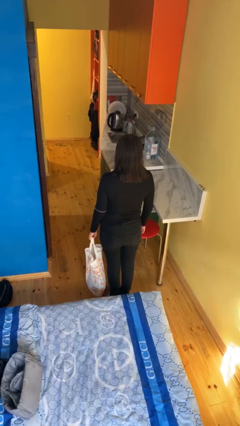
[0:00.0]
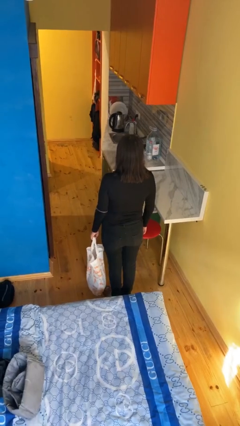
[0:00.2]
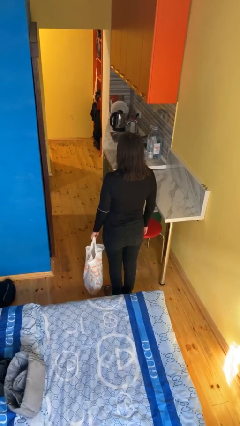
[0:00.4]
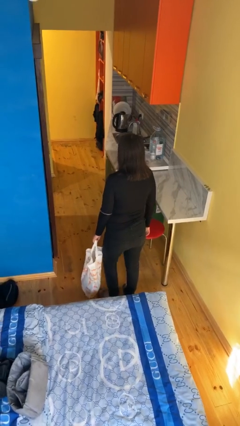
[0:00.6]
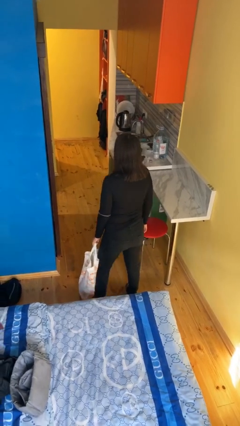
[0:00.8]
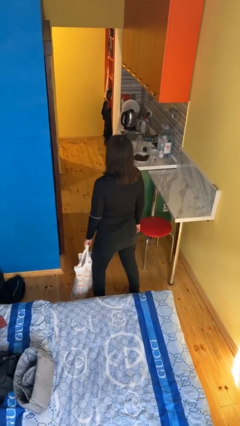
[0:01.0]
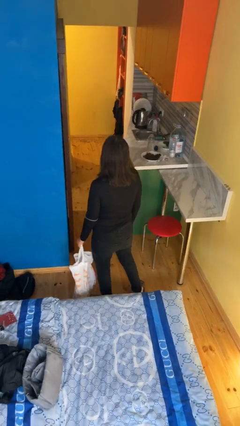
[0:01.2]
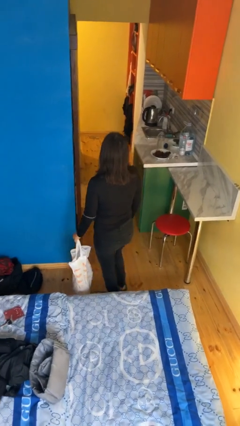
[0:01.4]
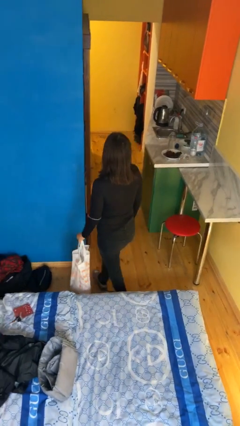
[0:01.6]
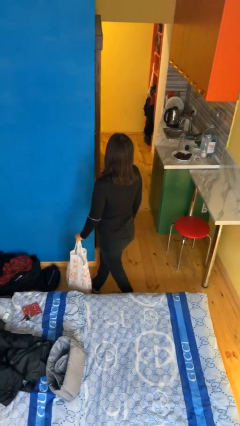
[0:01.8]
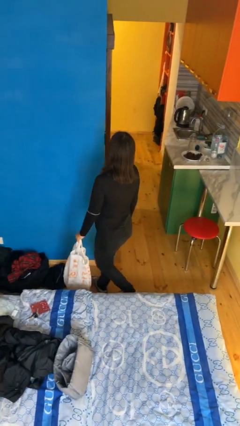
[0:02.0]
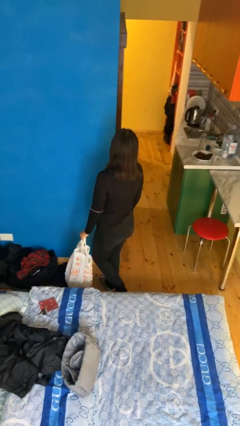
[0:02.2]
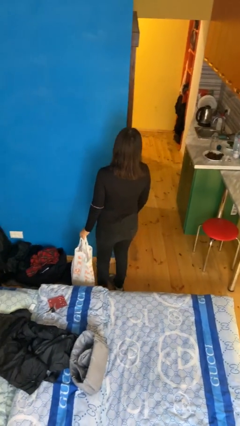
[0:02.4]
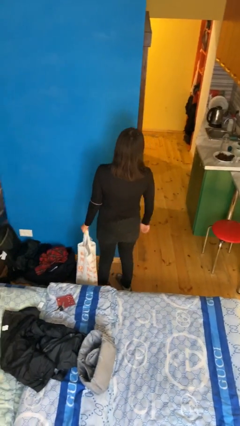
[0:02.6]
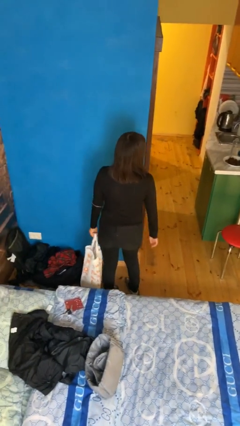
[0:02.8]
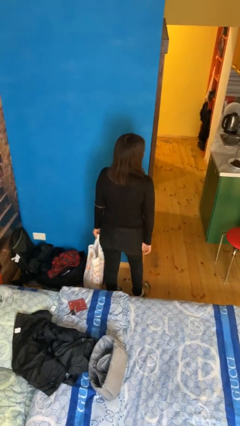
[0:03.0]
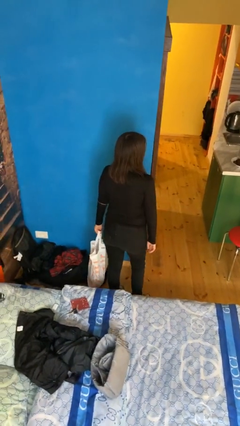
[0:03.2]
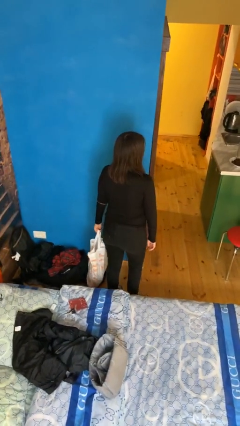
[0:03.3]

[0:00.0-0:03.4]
person carries groceries

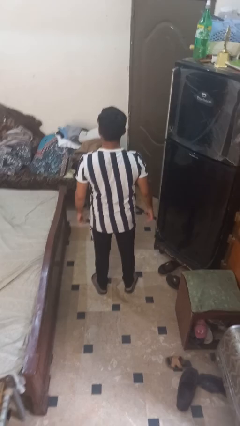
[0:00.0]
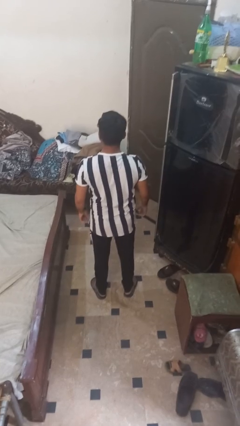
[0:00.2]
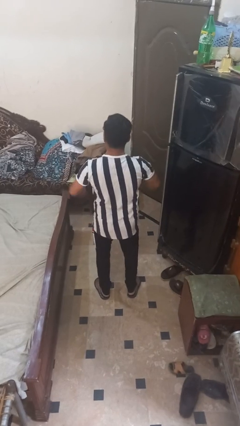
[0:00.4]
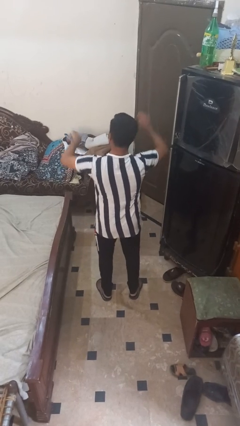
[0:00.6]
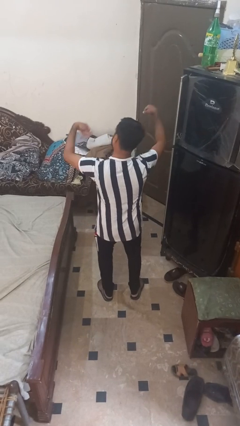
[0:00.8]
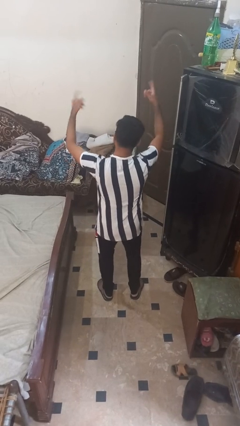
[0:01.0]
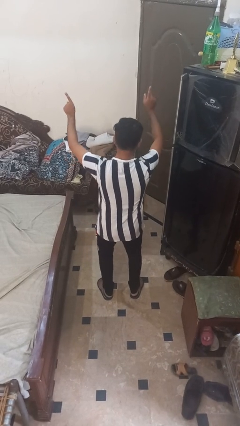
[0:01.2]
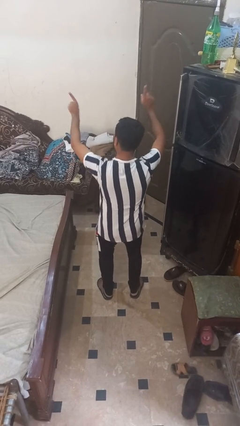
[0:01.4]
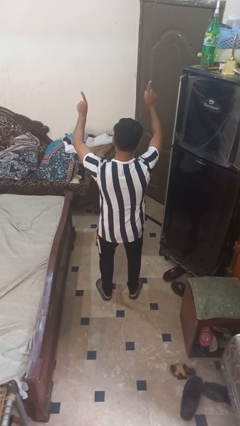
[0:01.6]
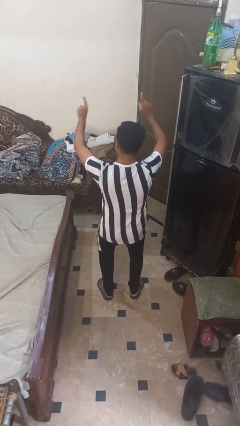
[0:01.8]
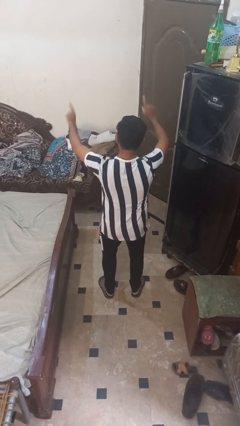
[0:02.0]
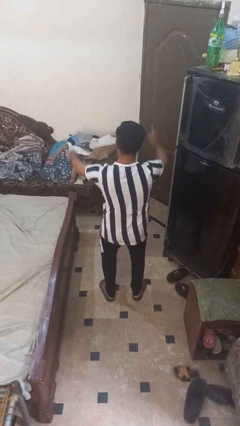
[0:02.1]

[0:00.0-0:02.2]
person dances in place

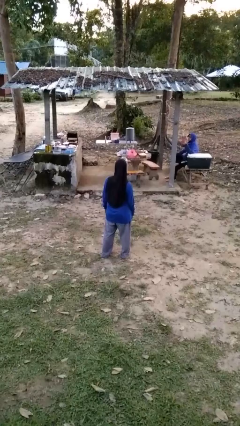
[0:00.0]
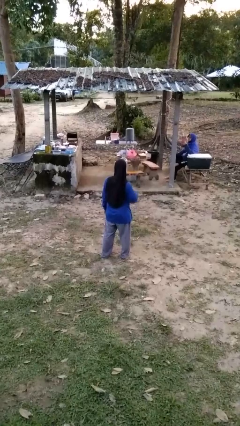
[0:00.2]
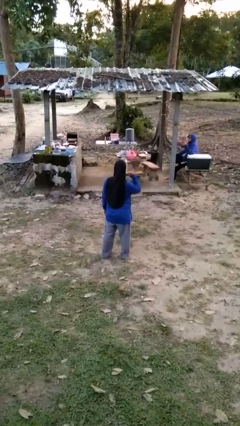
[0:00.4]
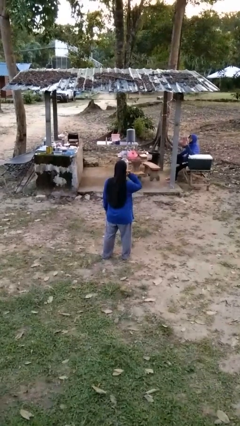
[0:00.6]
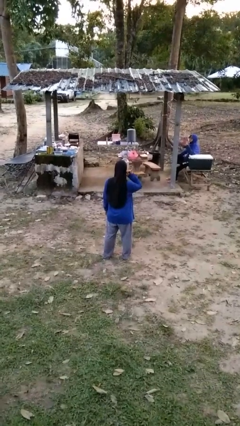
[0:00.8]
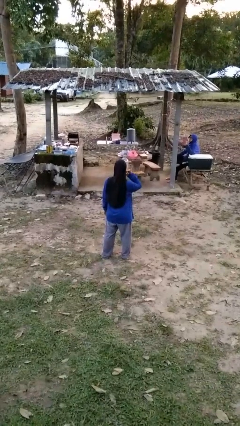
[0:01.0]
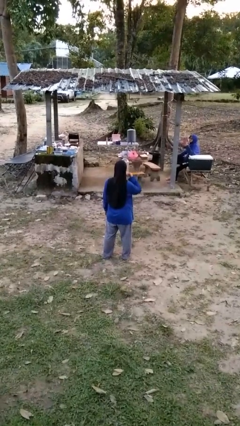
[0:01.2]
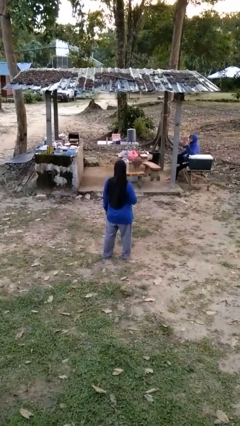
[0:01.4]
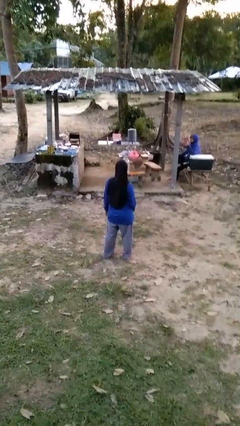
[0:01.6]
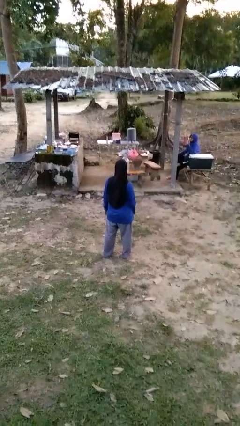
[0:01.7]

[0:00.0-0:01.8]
person gestures call me

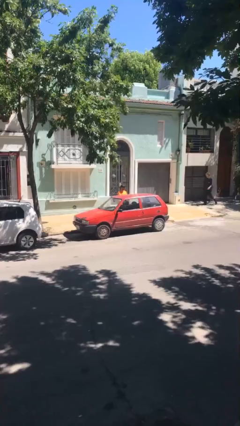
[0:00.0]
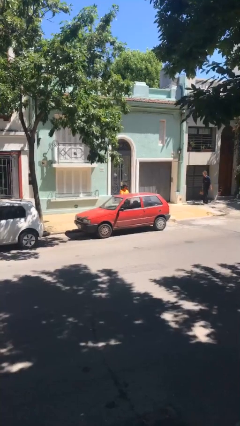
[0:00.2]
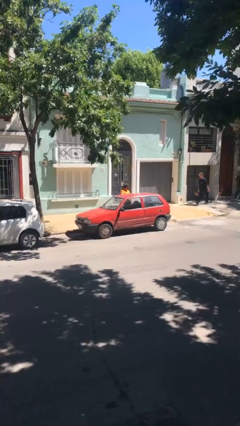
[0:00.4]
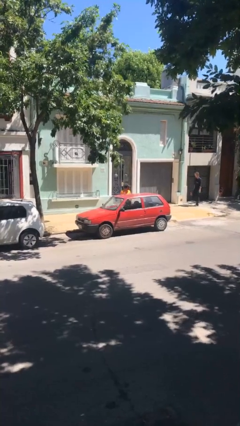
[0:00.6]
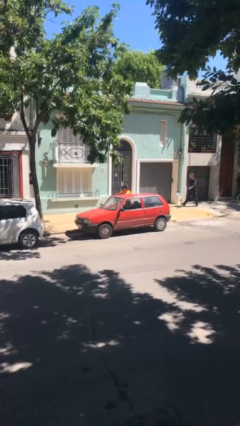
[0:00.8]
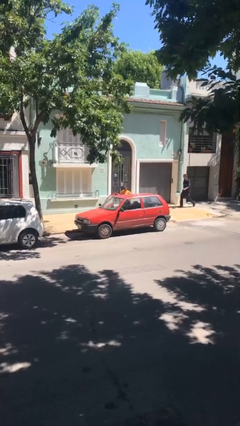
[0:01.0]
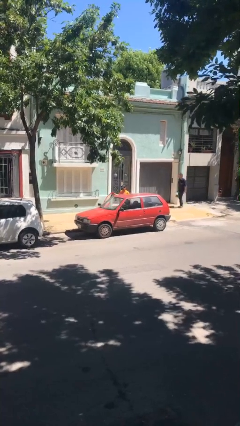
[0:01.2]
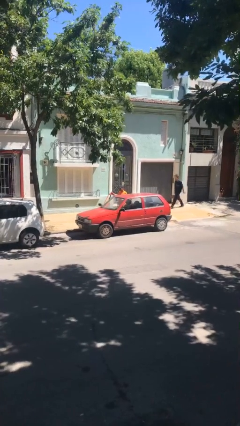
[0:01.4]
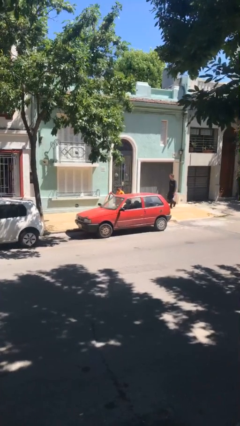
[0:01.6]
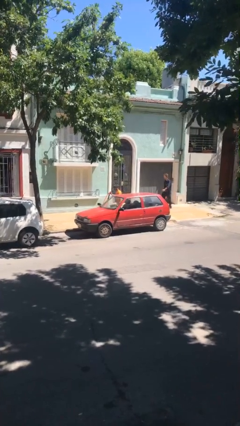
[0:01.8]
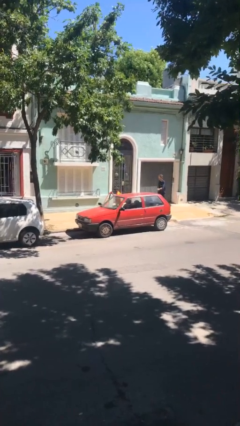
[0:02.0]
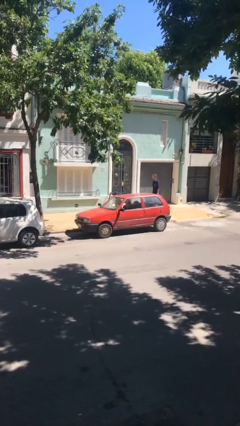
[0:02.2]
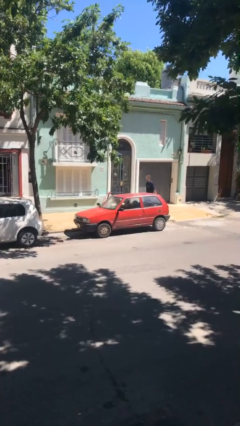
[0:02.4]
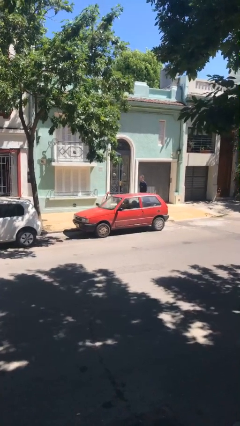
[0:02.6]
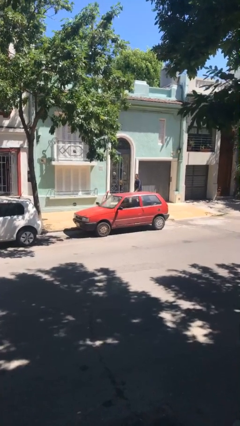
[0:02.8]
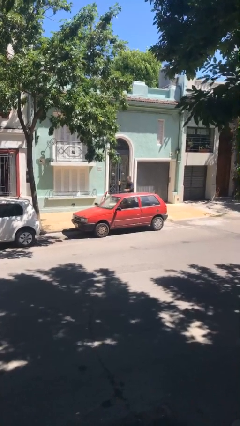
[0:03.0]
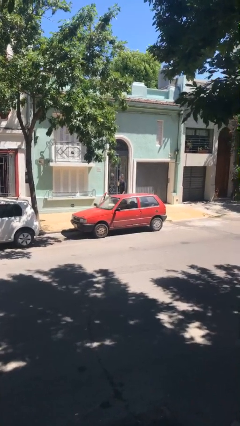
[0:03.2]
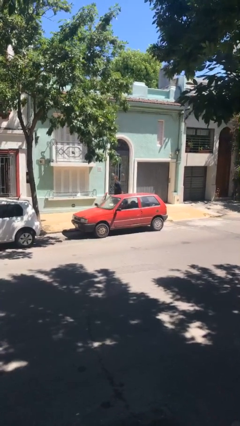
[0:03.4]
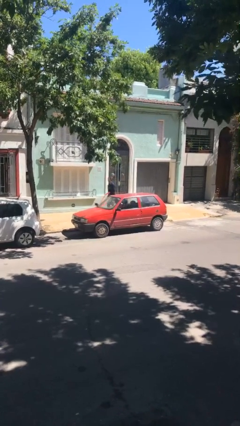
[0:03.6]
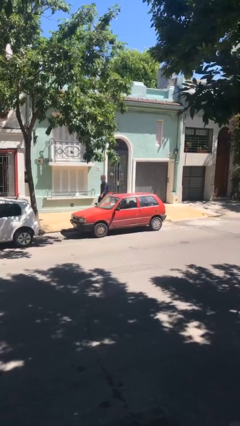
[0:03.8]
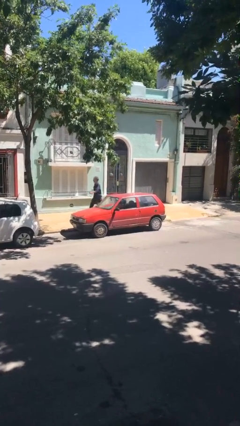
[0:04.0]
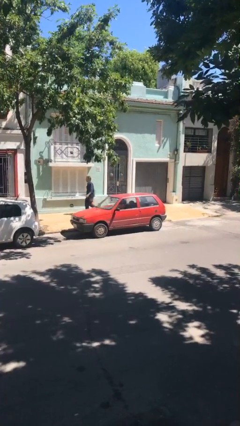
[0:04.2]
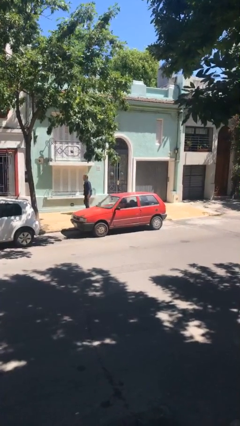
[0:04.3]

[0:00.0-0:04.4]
car picks up person

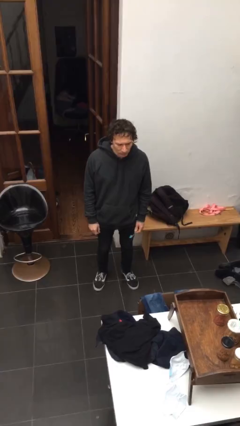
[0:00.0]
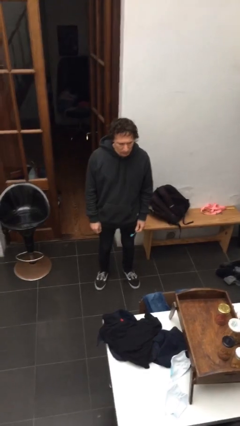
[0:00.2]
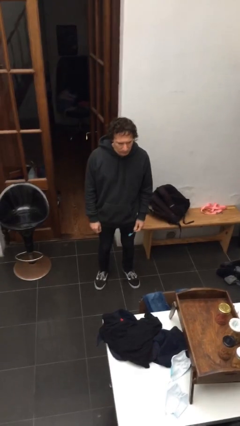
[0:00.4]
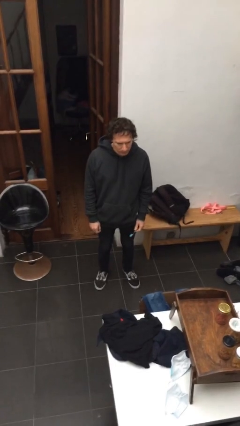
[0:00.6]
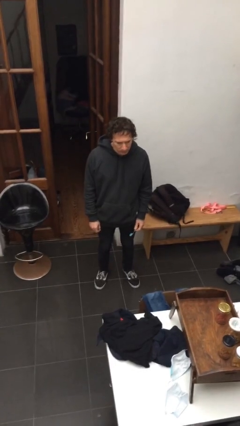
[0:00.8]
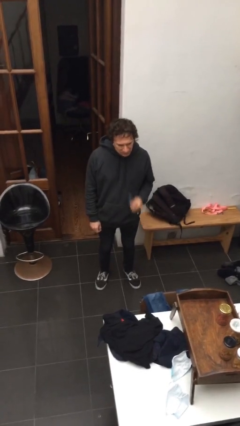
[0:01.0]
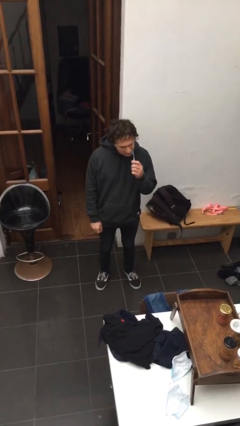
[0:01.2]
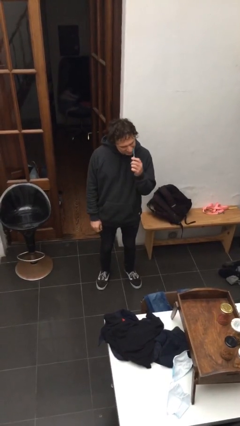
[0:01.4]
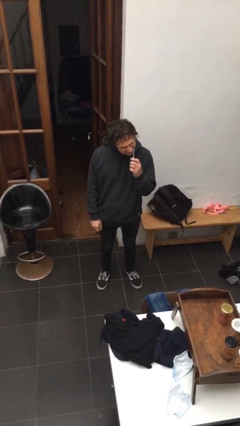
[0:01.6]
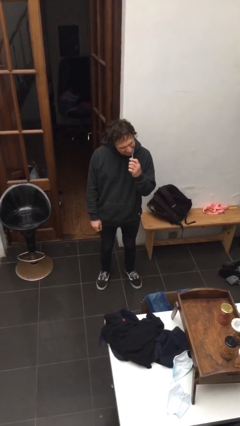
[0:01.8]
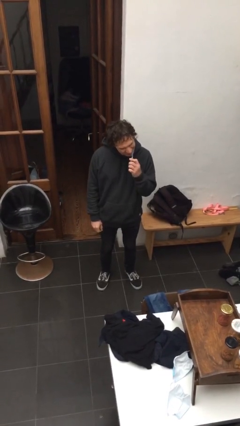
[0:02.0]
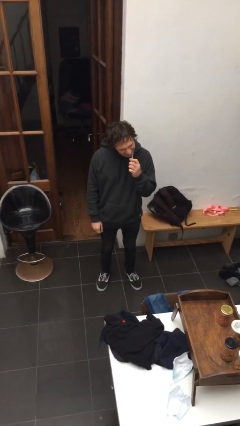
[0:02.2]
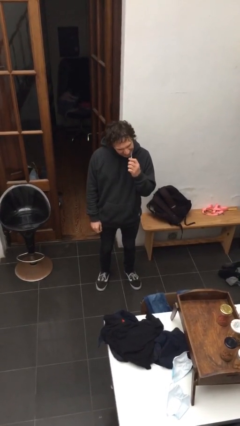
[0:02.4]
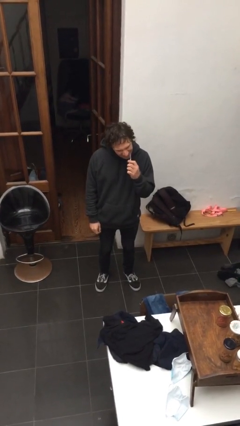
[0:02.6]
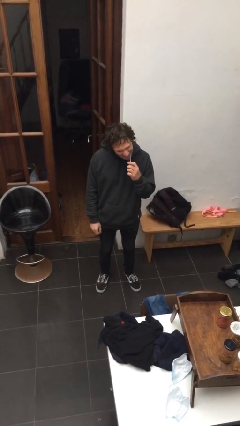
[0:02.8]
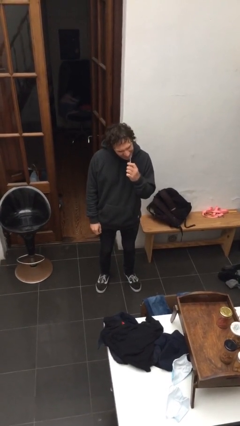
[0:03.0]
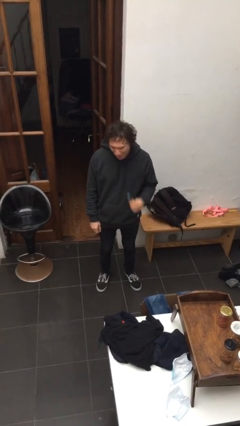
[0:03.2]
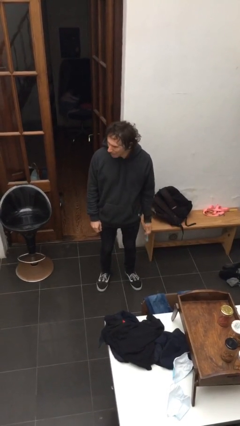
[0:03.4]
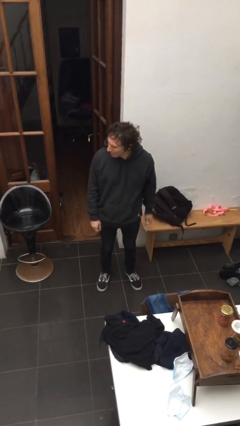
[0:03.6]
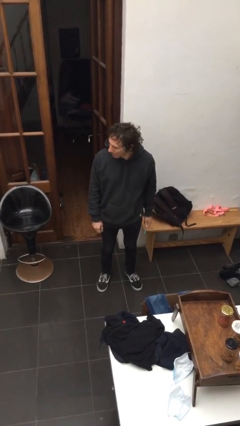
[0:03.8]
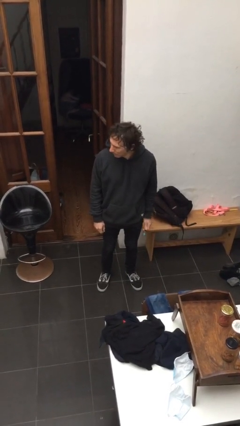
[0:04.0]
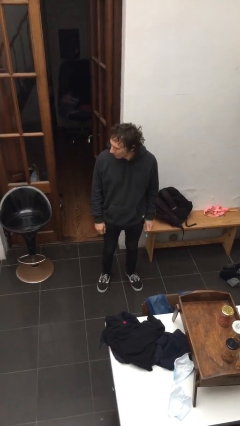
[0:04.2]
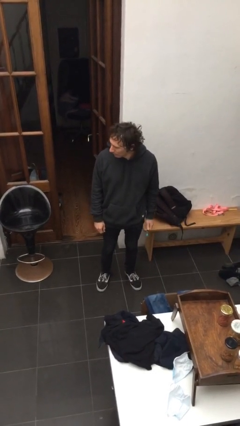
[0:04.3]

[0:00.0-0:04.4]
person flosses

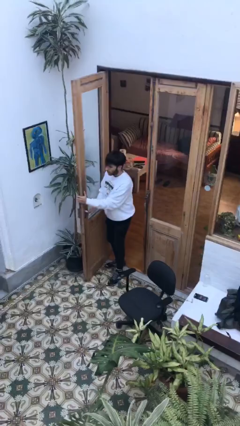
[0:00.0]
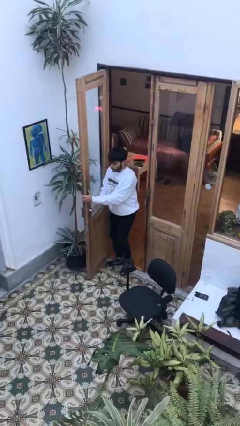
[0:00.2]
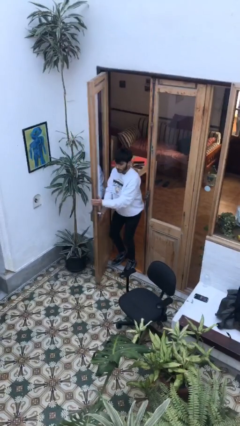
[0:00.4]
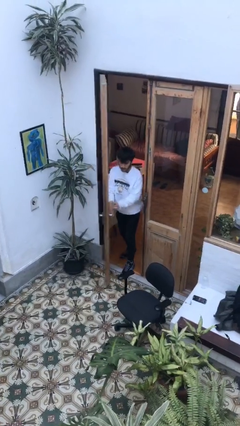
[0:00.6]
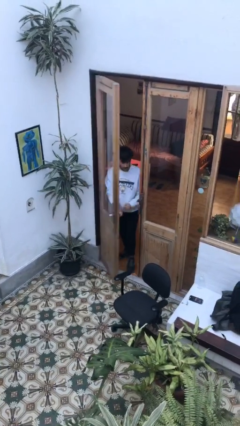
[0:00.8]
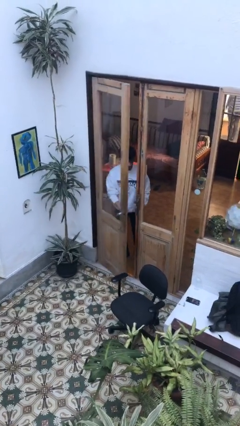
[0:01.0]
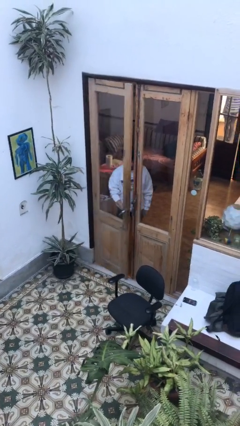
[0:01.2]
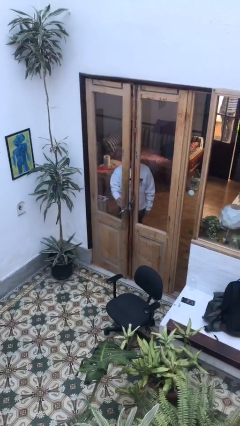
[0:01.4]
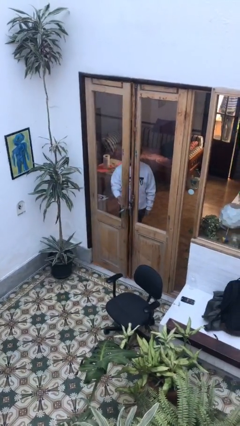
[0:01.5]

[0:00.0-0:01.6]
person closes facility door
